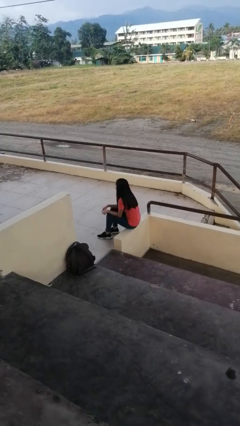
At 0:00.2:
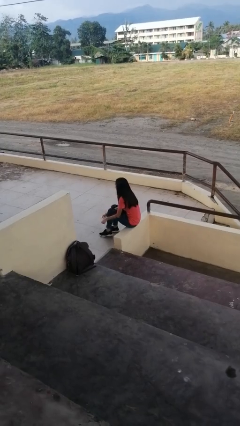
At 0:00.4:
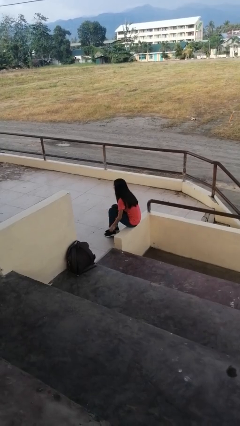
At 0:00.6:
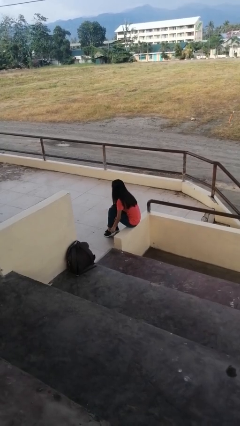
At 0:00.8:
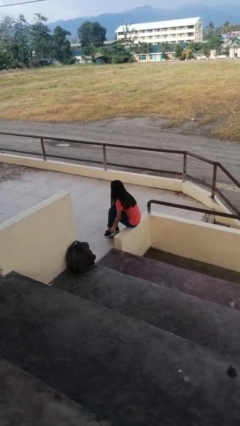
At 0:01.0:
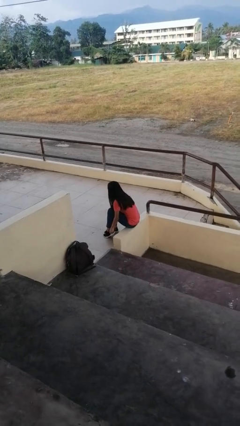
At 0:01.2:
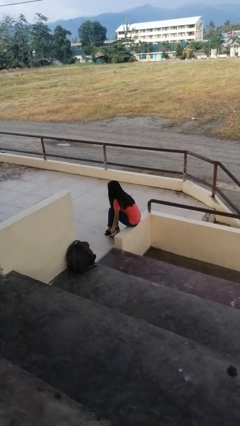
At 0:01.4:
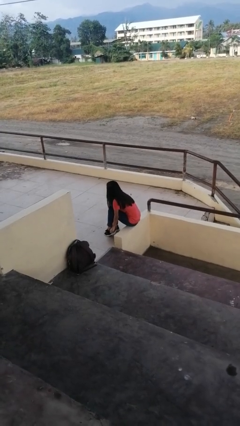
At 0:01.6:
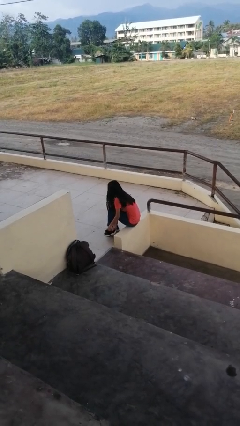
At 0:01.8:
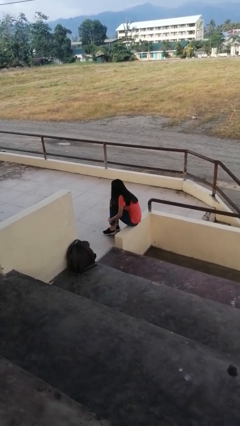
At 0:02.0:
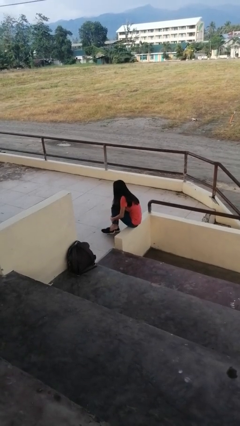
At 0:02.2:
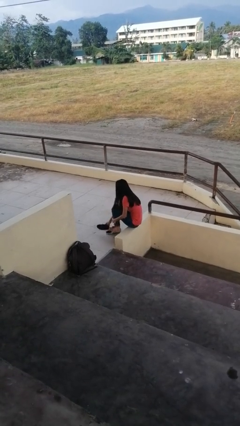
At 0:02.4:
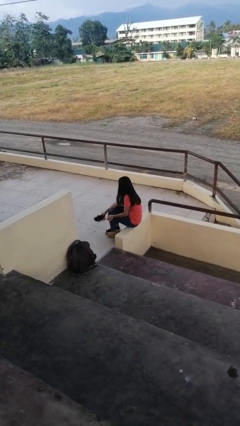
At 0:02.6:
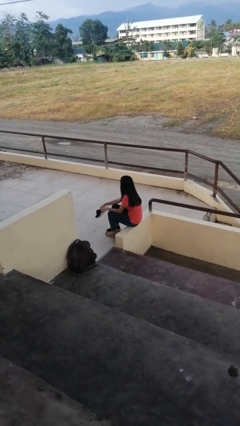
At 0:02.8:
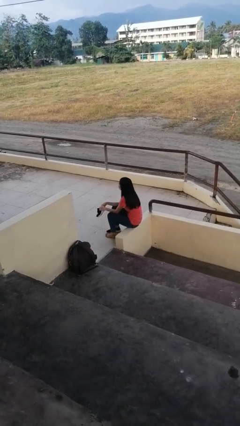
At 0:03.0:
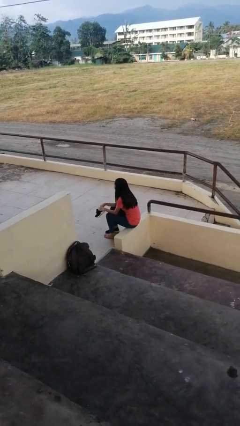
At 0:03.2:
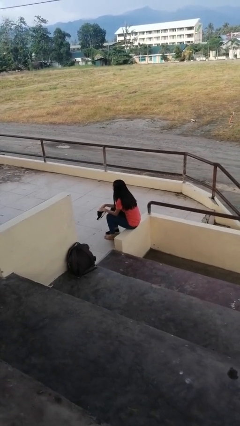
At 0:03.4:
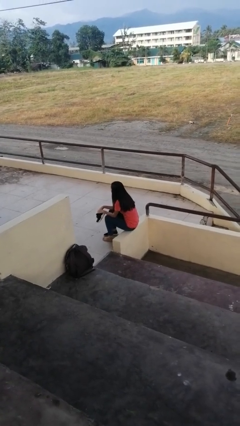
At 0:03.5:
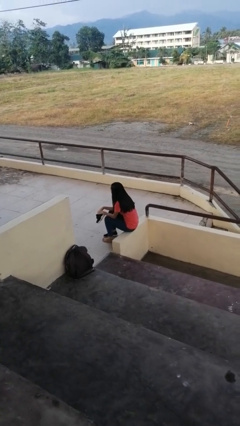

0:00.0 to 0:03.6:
person takes off shoes

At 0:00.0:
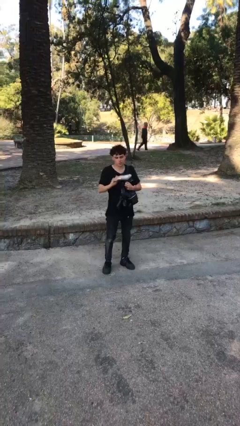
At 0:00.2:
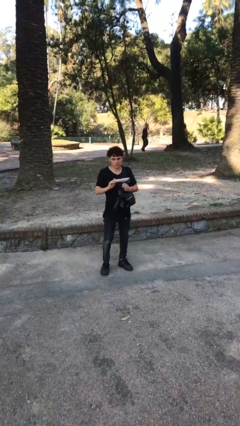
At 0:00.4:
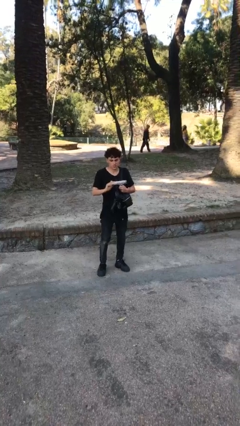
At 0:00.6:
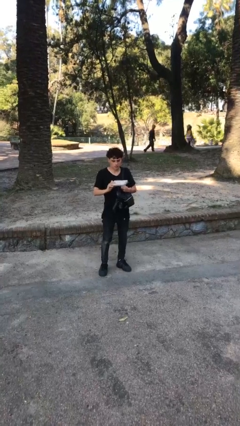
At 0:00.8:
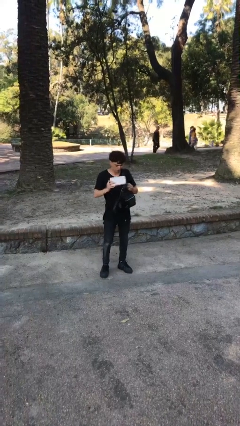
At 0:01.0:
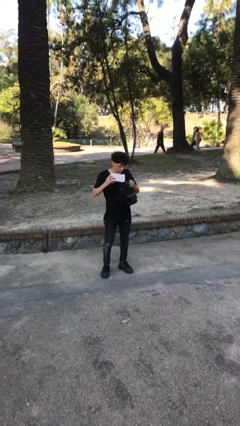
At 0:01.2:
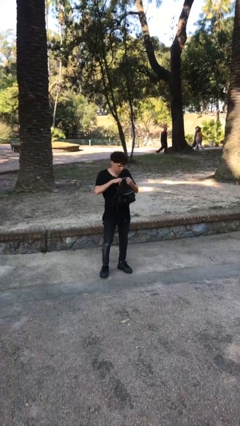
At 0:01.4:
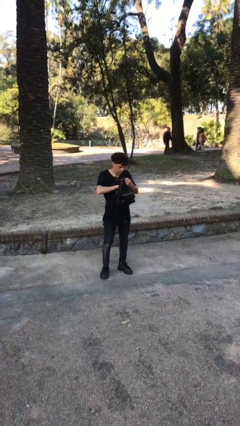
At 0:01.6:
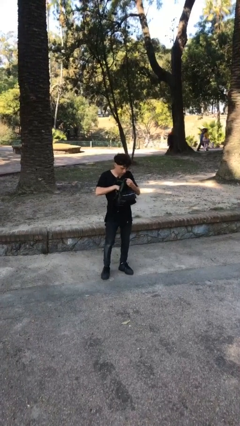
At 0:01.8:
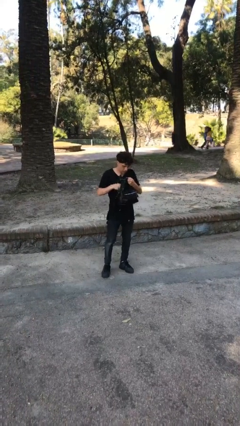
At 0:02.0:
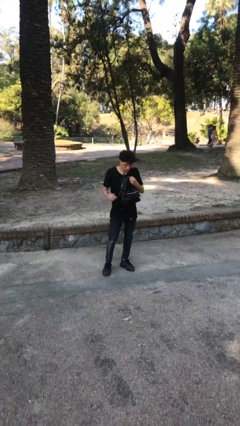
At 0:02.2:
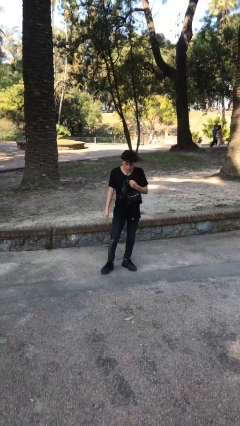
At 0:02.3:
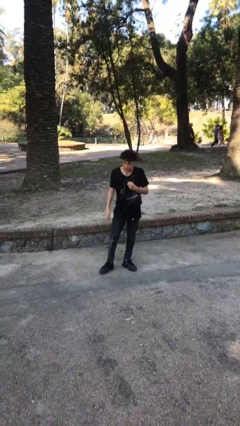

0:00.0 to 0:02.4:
person puts object into purse

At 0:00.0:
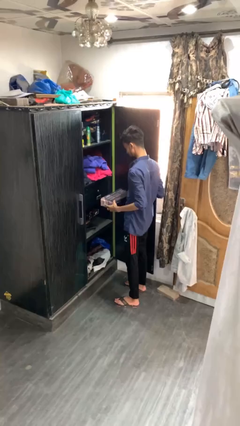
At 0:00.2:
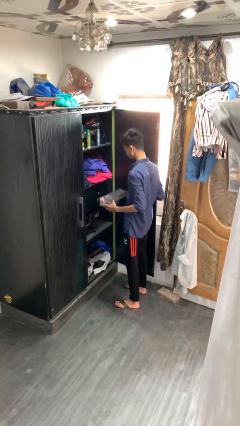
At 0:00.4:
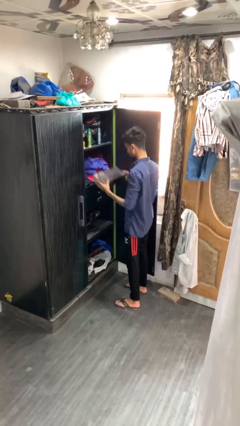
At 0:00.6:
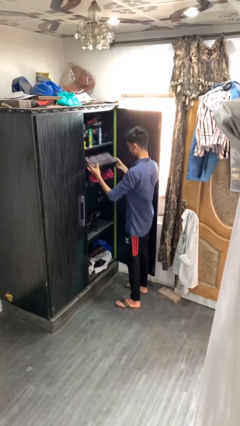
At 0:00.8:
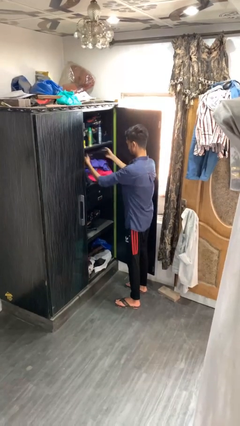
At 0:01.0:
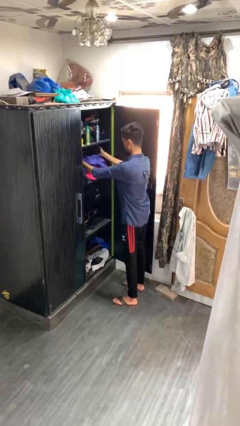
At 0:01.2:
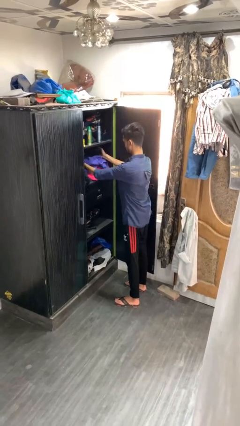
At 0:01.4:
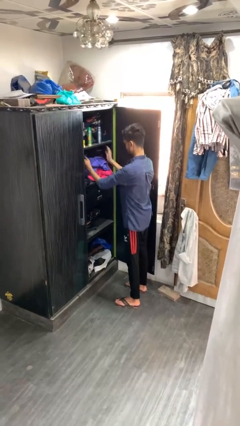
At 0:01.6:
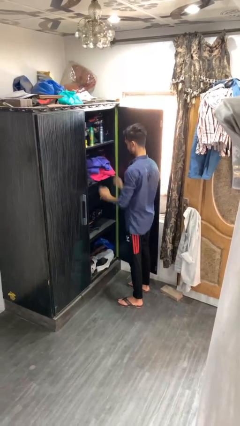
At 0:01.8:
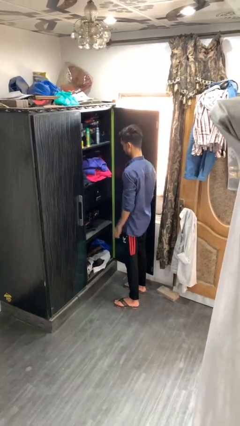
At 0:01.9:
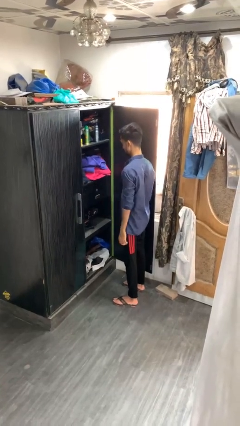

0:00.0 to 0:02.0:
person puts down object into cabinet

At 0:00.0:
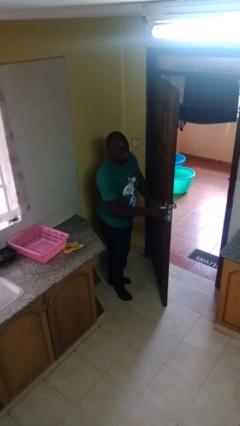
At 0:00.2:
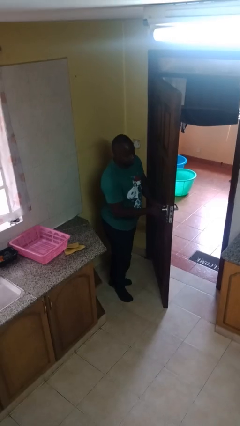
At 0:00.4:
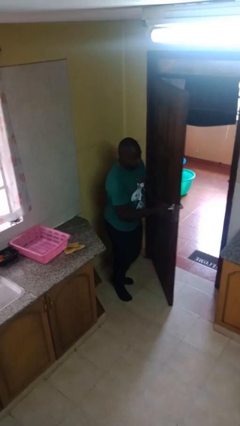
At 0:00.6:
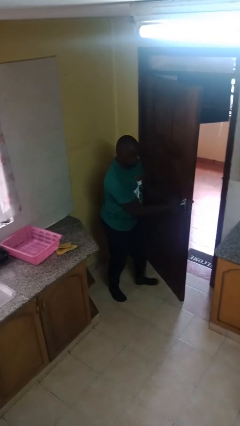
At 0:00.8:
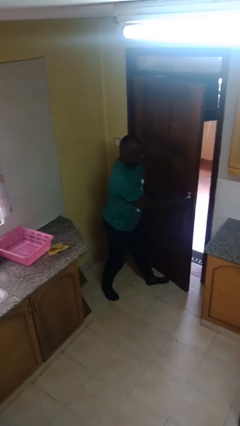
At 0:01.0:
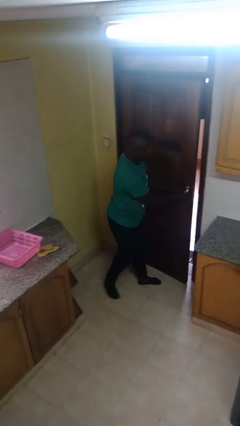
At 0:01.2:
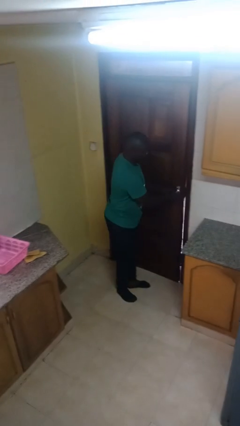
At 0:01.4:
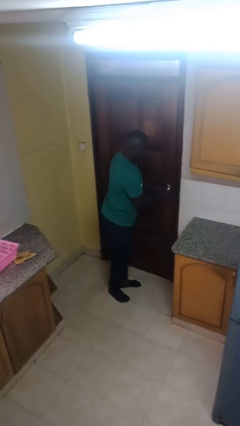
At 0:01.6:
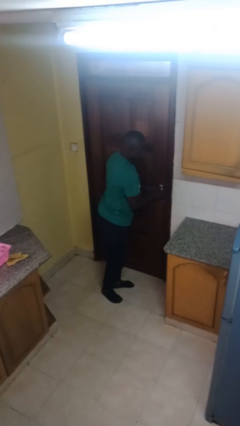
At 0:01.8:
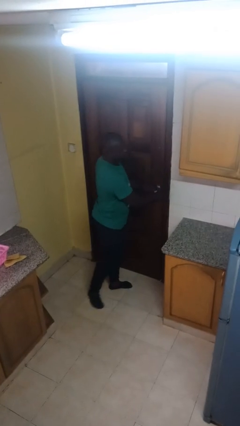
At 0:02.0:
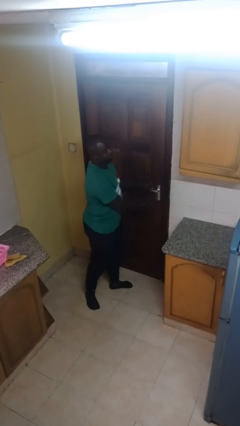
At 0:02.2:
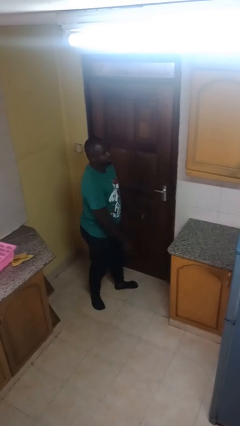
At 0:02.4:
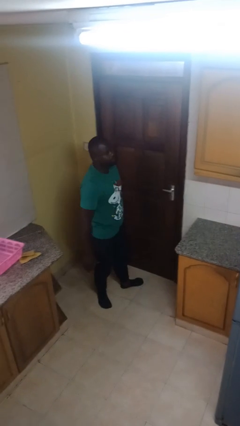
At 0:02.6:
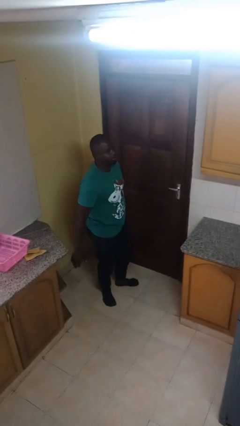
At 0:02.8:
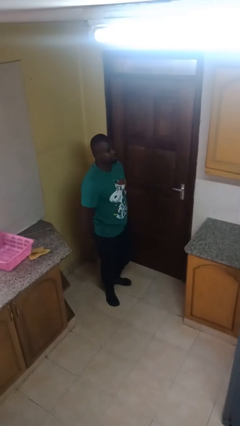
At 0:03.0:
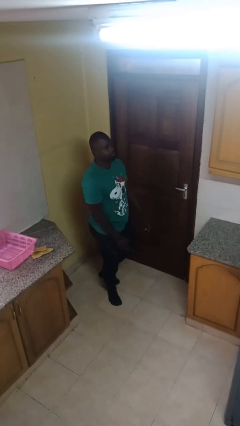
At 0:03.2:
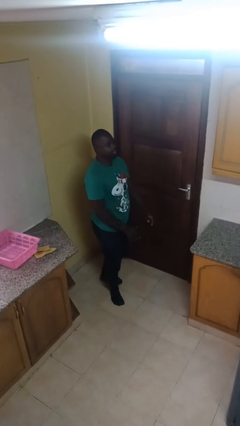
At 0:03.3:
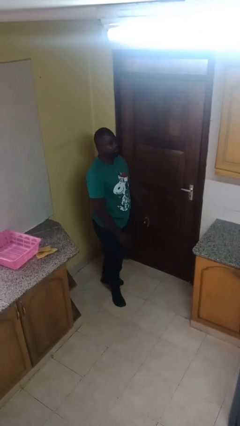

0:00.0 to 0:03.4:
person closes facility door

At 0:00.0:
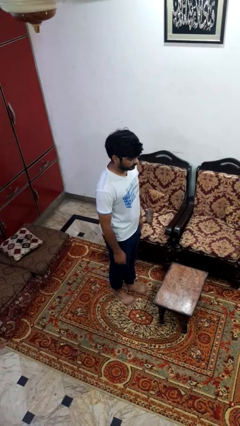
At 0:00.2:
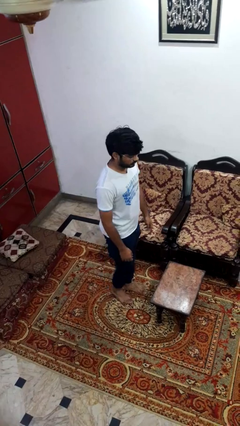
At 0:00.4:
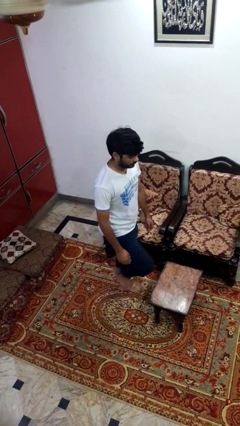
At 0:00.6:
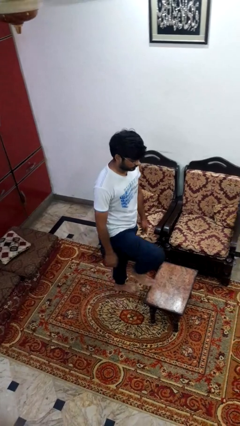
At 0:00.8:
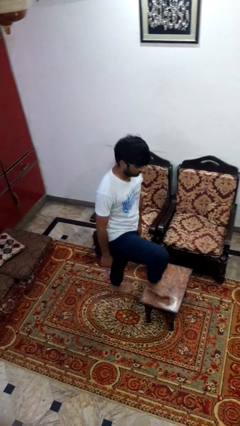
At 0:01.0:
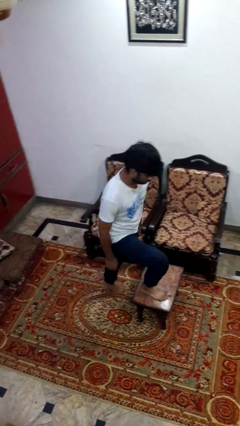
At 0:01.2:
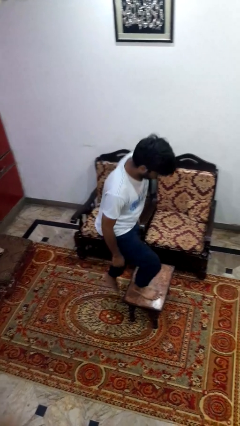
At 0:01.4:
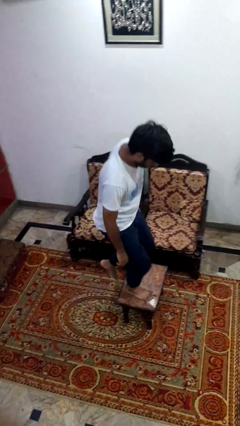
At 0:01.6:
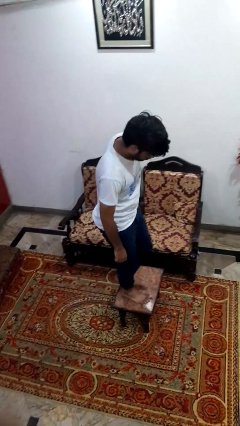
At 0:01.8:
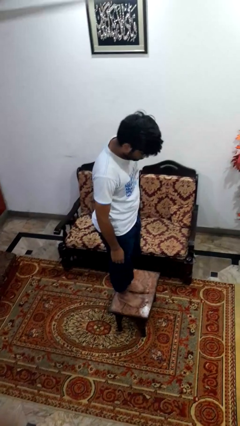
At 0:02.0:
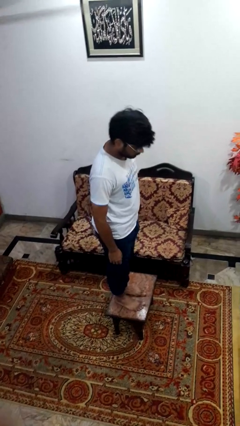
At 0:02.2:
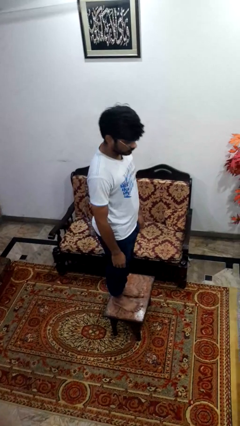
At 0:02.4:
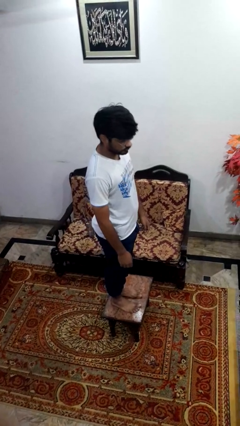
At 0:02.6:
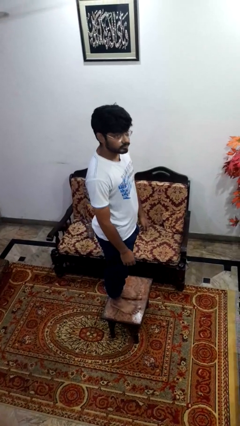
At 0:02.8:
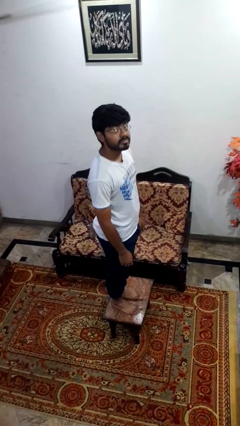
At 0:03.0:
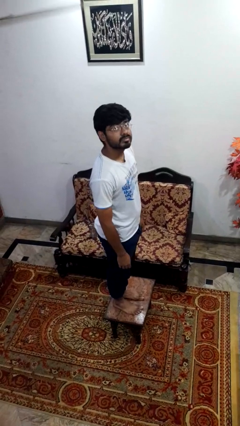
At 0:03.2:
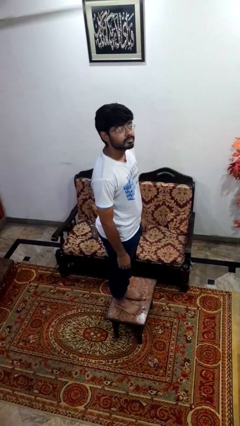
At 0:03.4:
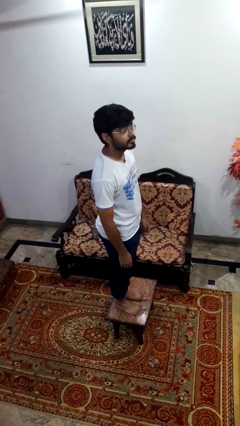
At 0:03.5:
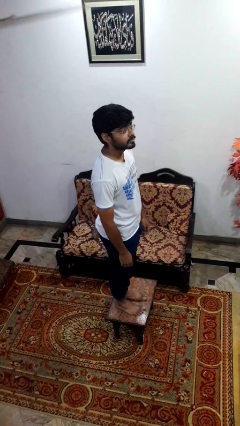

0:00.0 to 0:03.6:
person climbs on table

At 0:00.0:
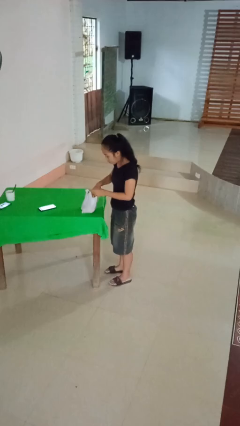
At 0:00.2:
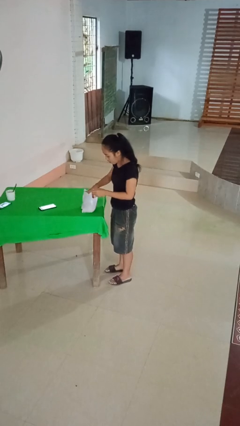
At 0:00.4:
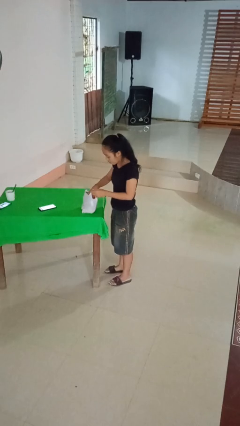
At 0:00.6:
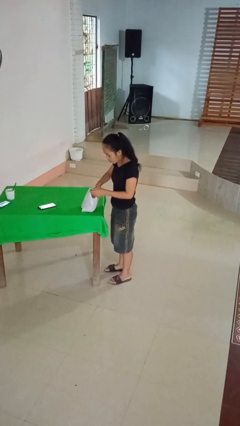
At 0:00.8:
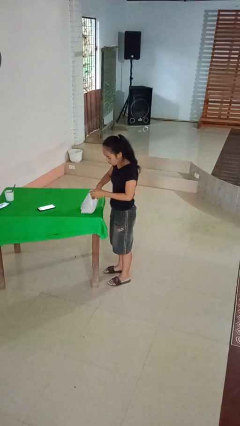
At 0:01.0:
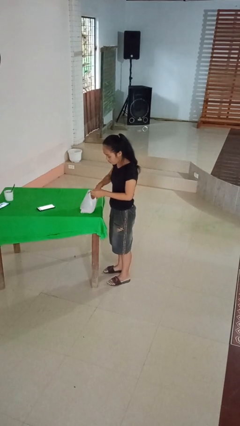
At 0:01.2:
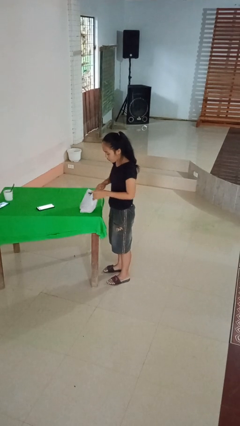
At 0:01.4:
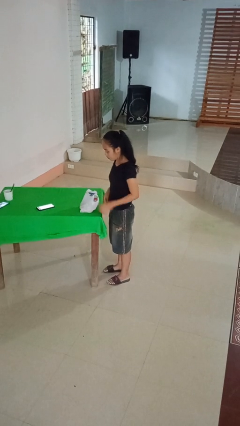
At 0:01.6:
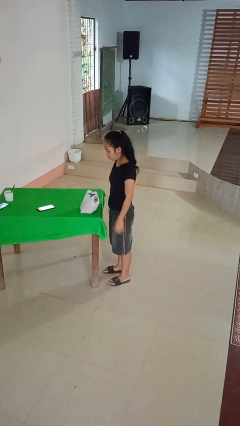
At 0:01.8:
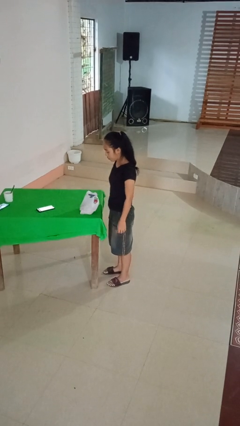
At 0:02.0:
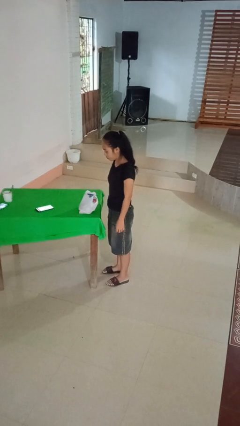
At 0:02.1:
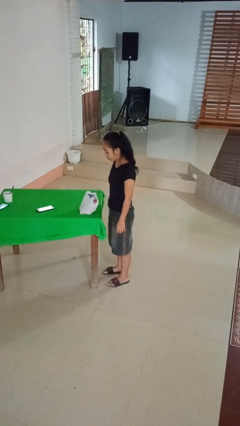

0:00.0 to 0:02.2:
person searches in bag
